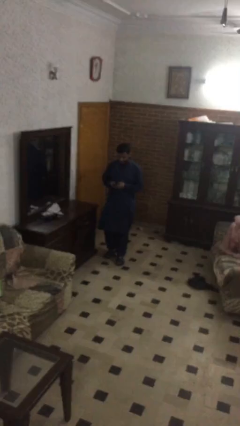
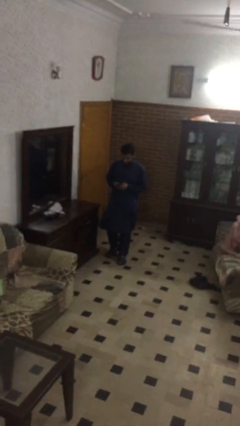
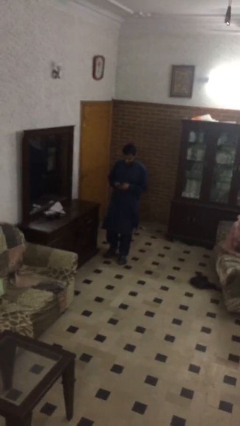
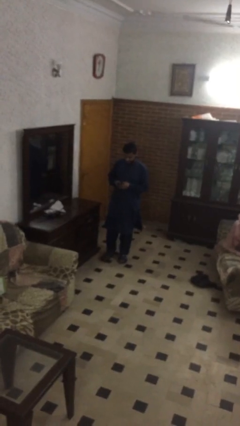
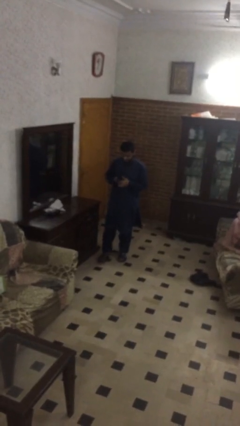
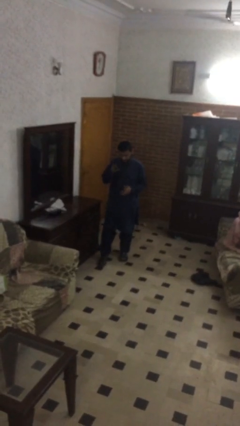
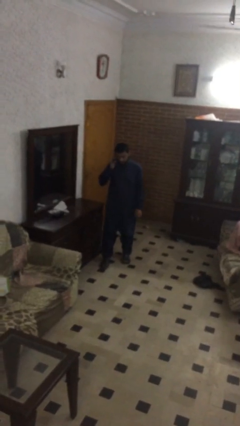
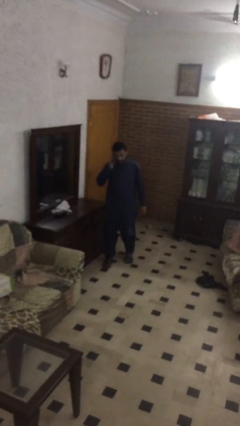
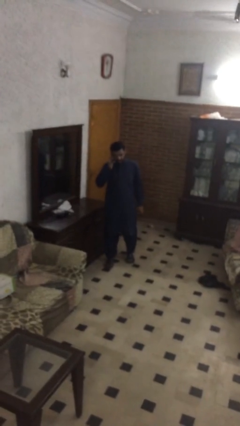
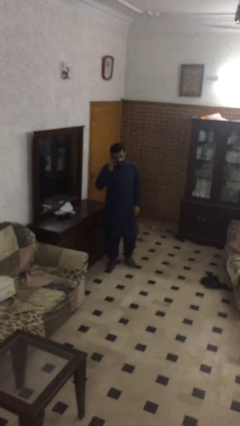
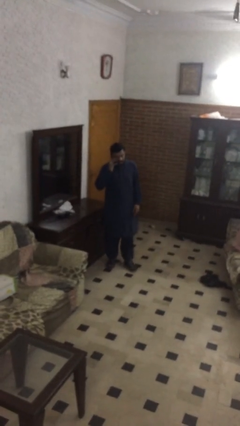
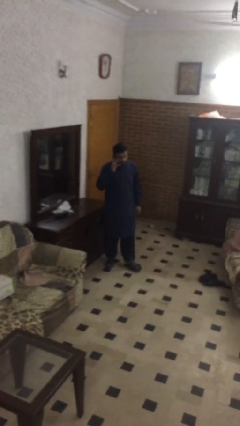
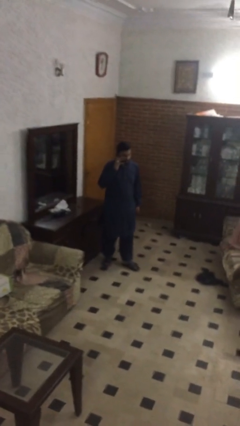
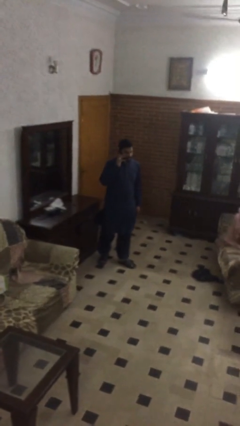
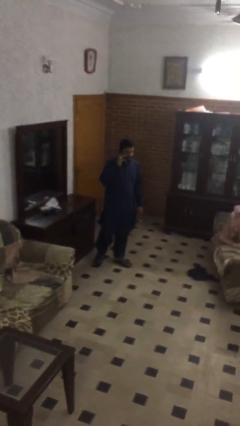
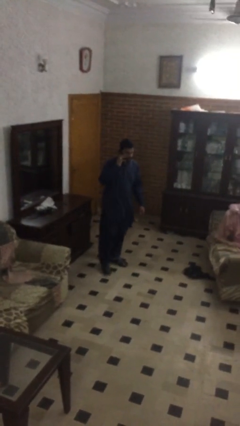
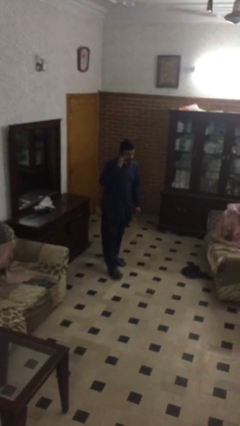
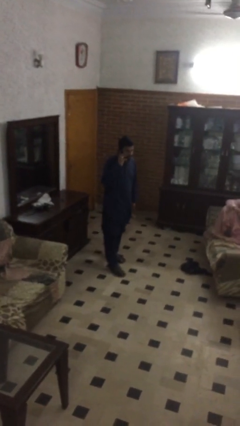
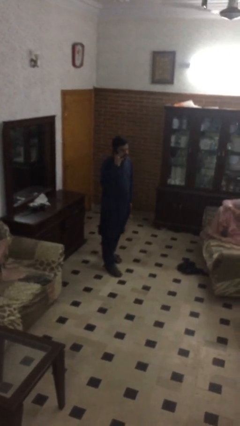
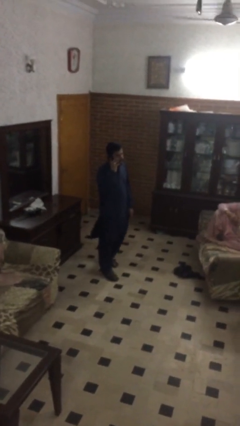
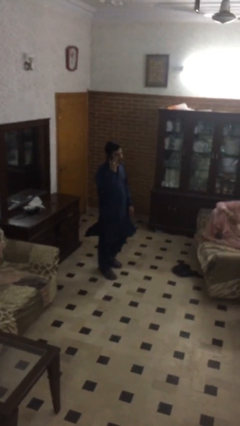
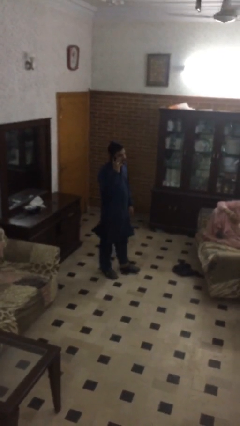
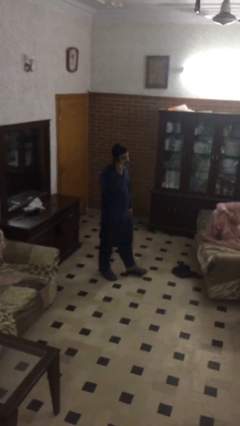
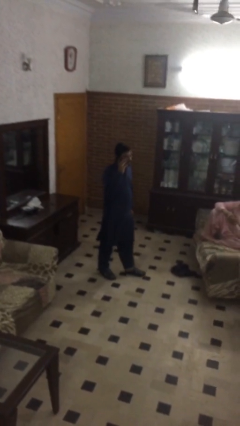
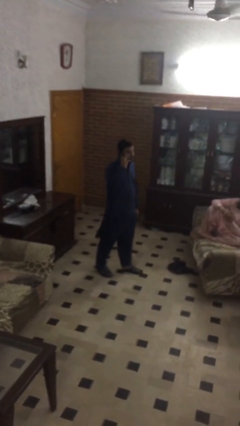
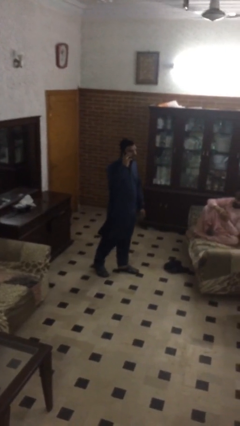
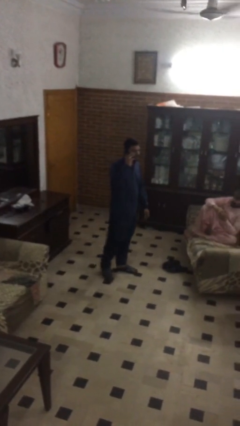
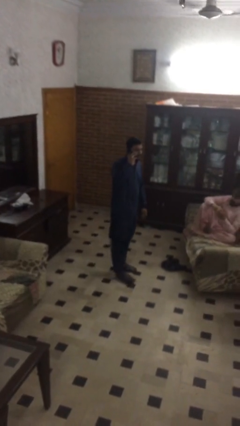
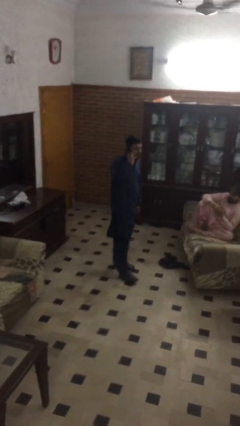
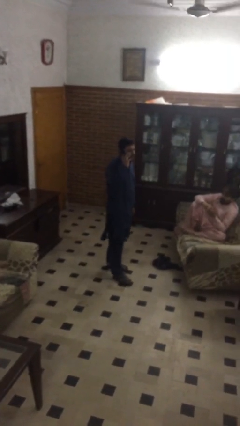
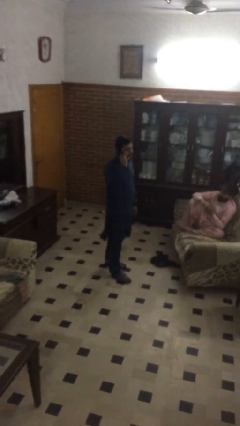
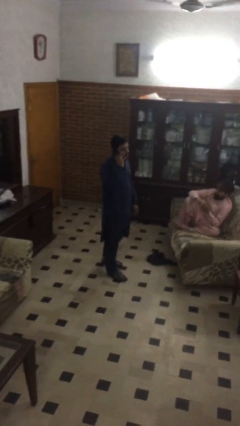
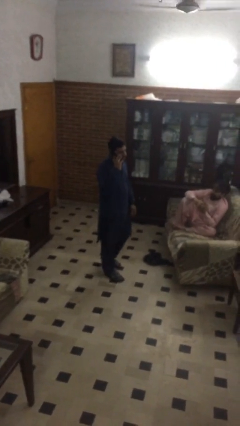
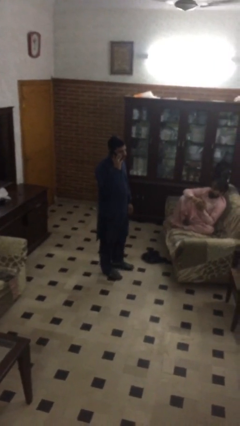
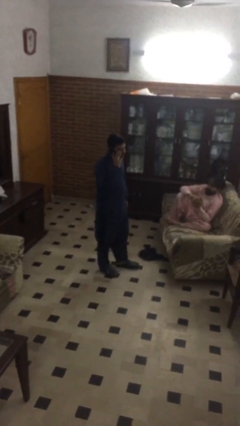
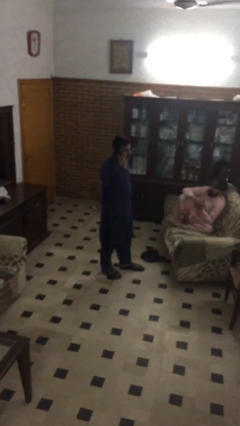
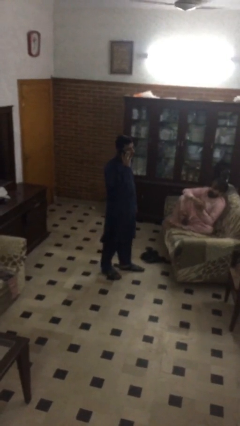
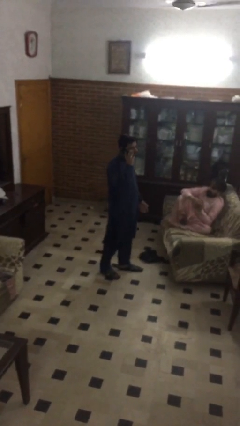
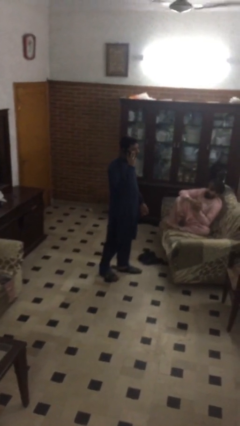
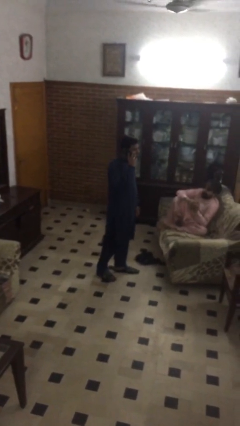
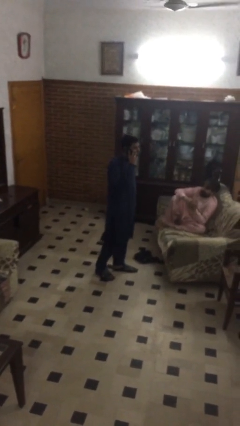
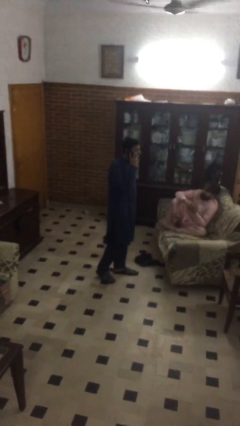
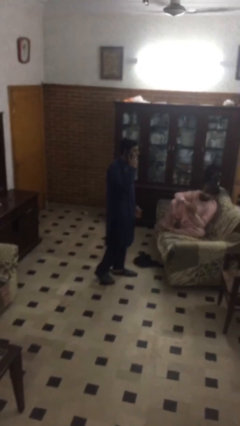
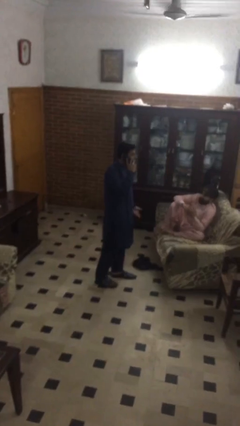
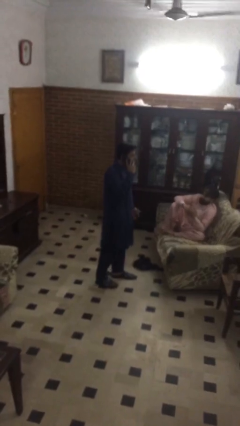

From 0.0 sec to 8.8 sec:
person talks on phone

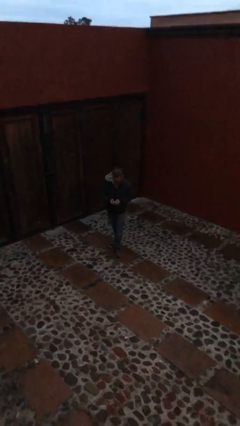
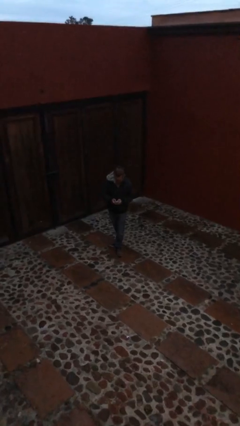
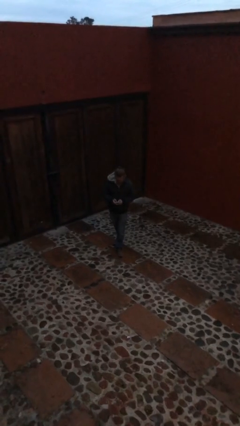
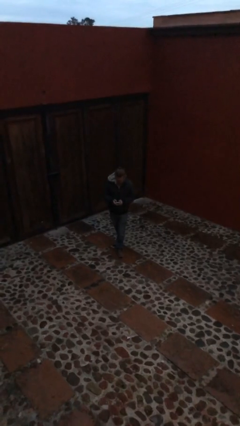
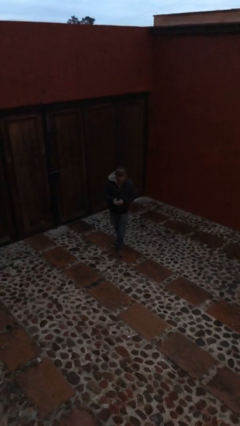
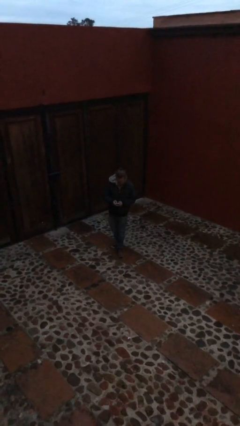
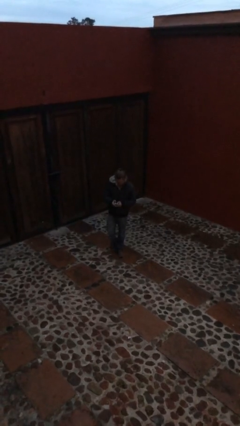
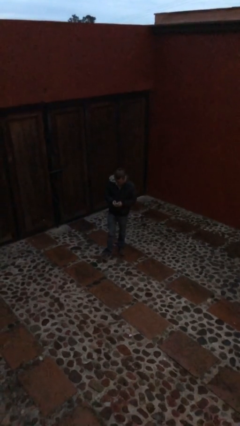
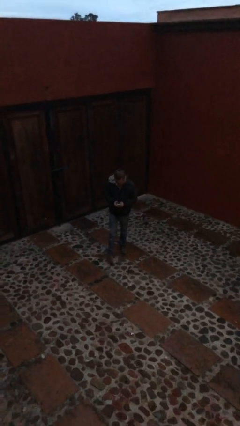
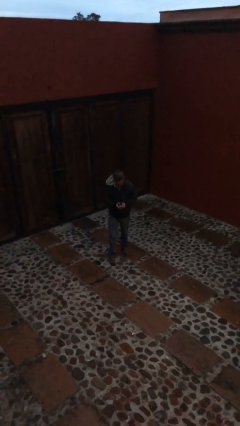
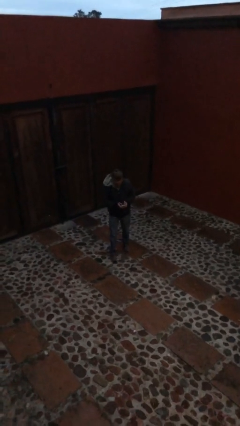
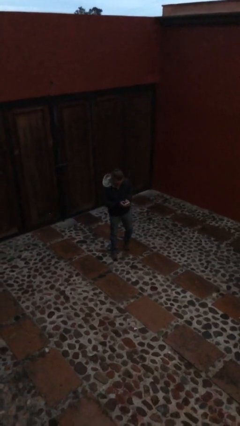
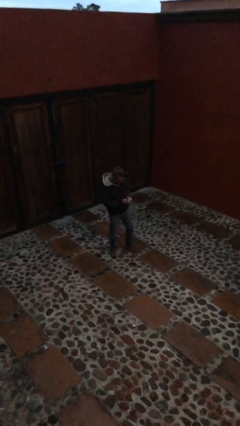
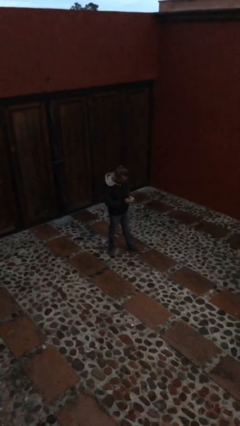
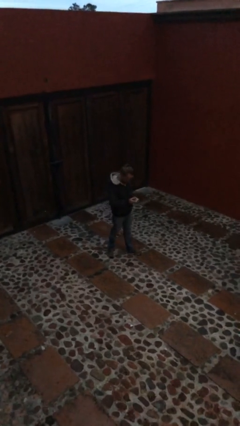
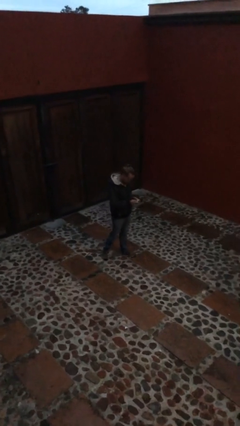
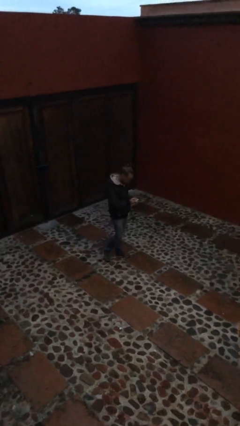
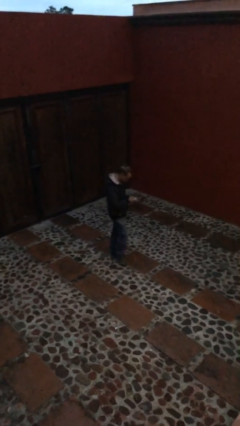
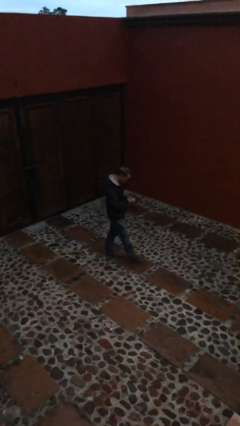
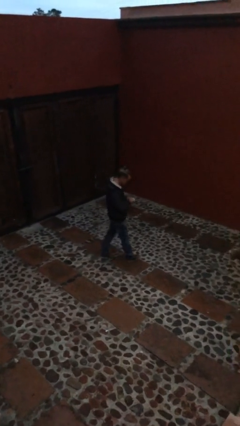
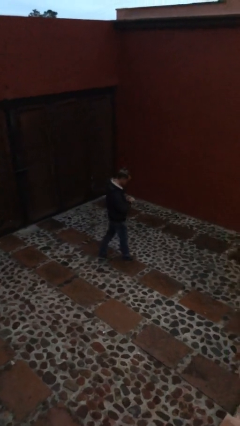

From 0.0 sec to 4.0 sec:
person texts on phone

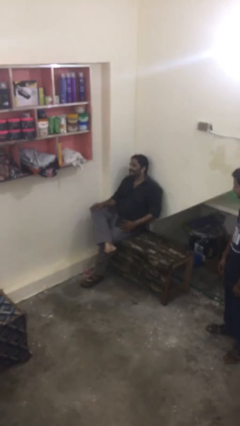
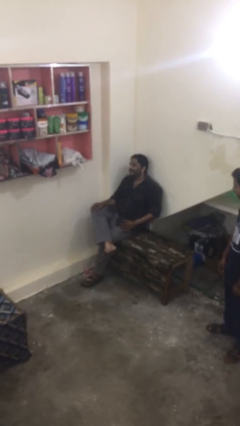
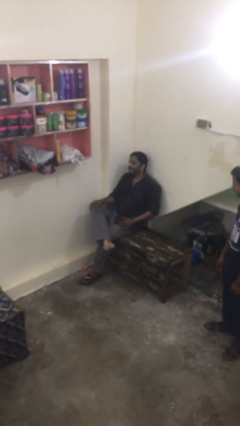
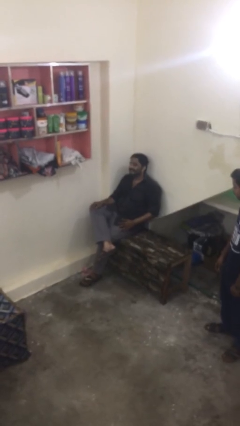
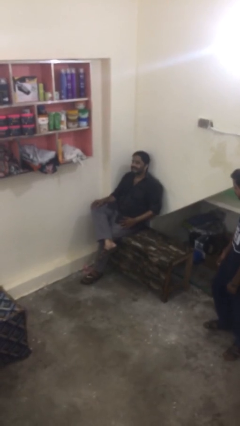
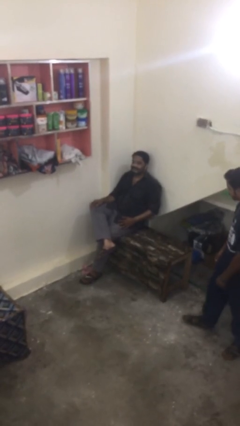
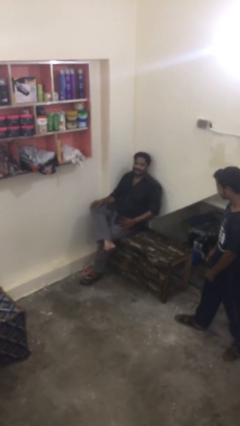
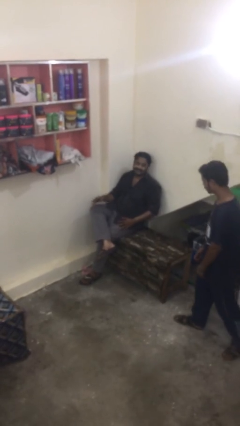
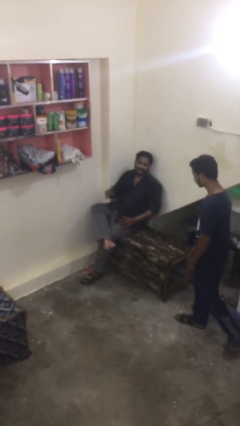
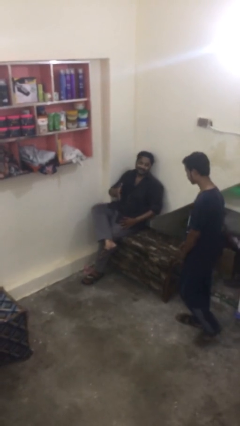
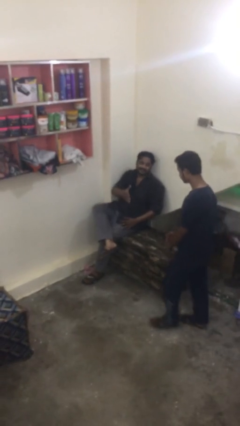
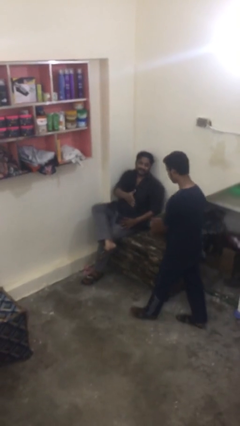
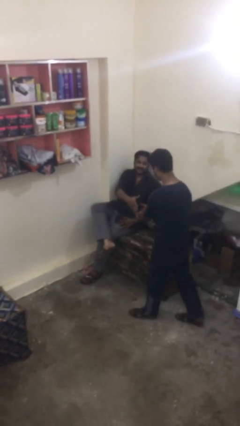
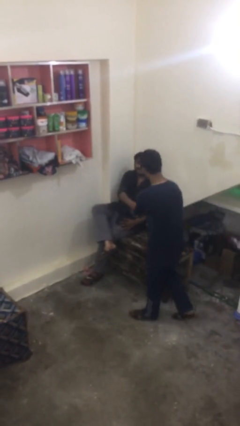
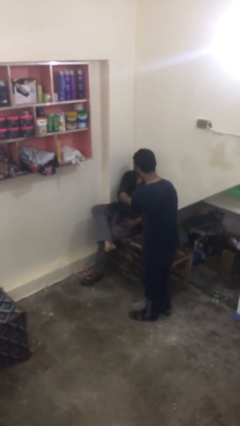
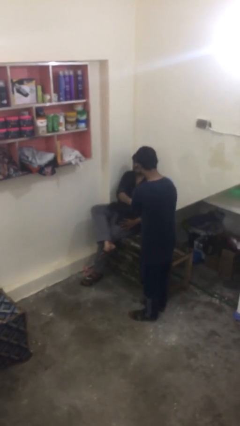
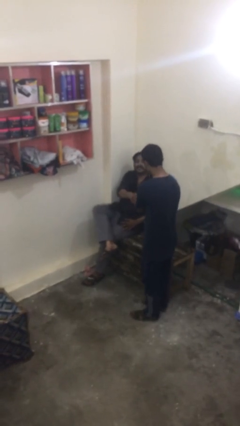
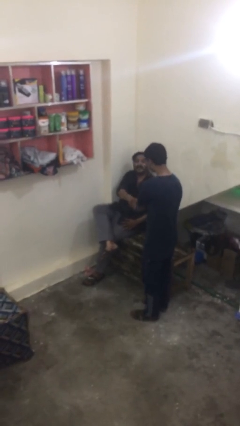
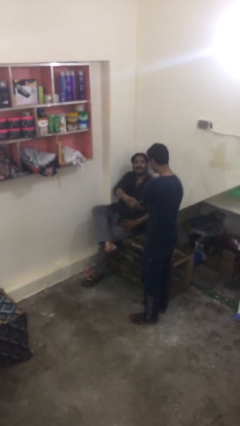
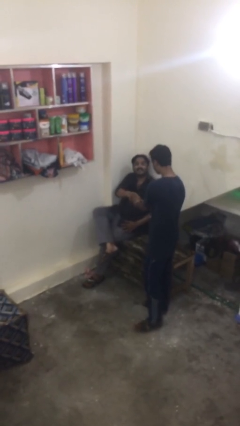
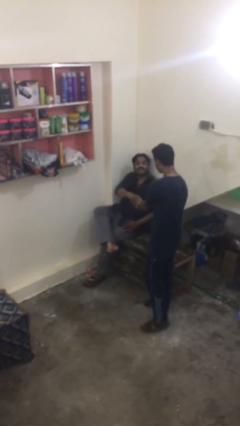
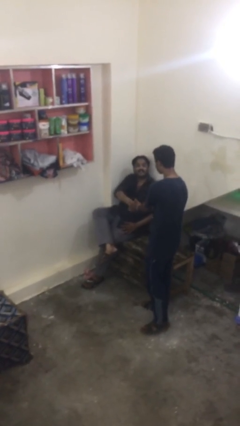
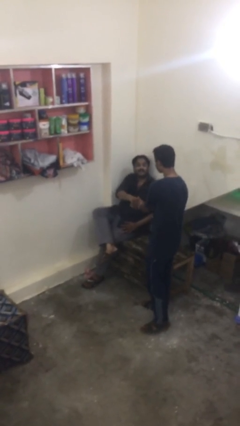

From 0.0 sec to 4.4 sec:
person shakes hand

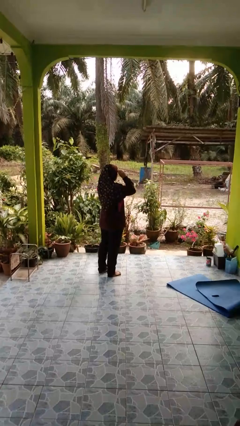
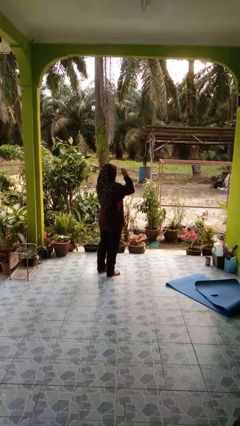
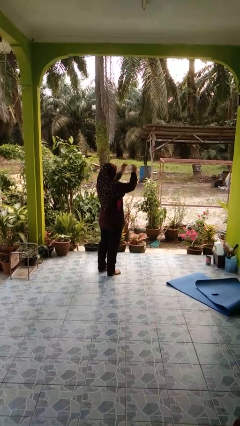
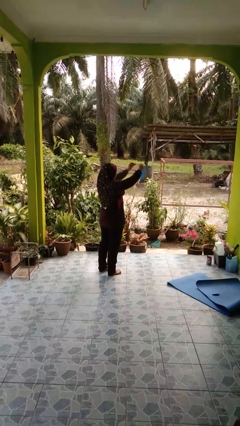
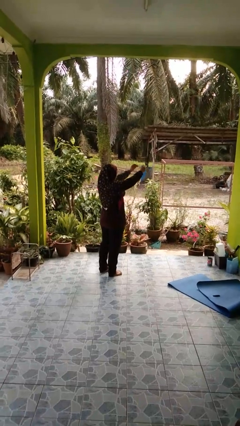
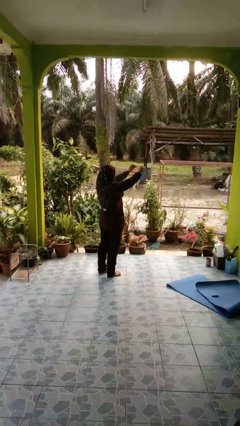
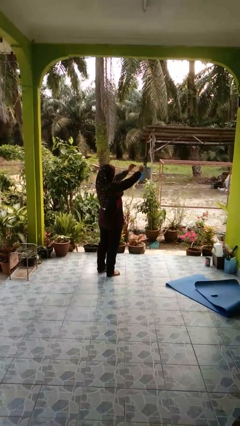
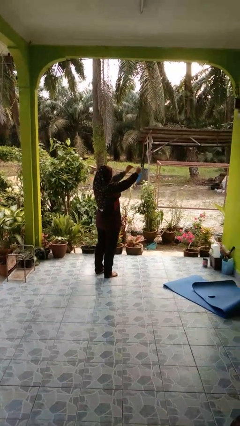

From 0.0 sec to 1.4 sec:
person takes off glasses
